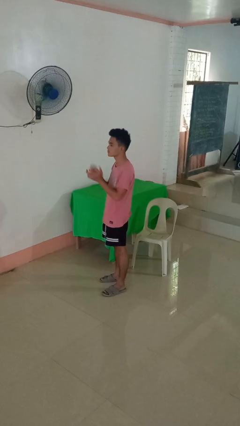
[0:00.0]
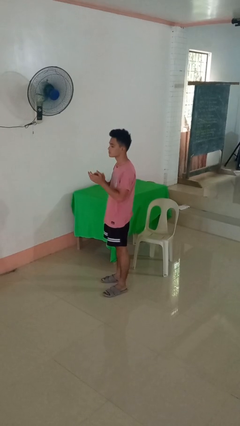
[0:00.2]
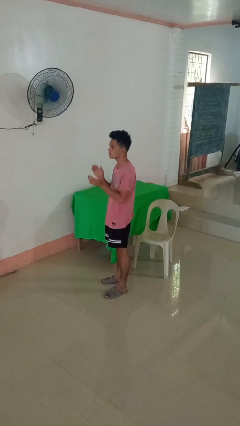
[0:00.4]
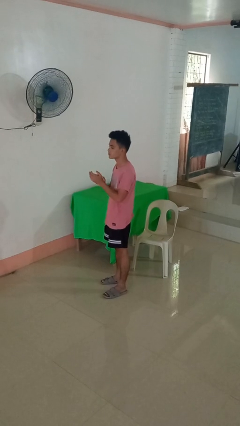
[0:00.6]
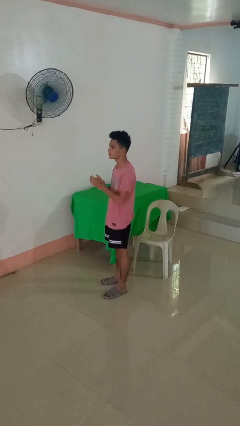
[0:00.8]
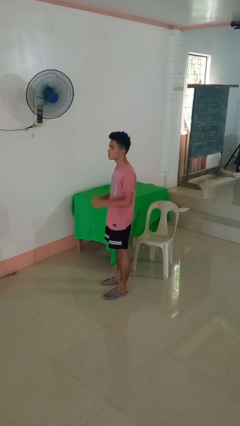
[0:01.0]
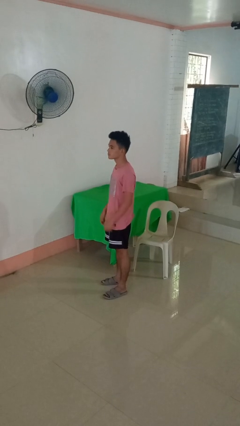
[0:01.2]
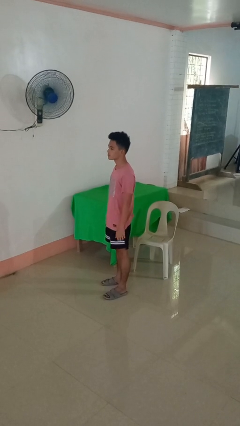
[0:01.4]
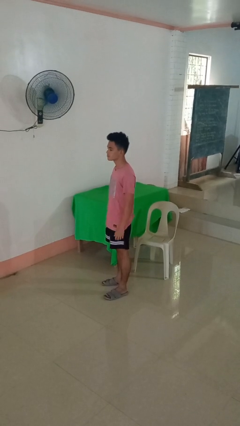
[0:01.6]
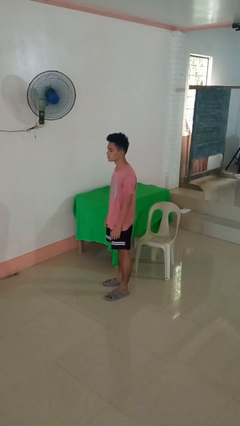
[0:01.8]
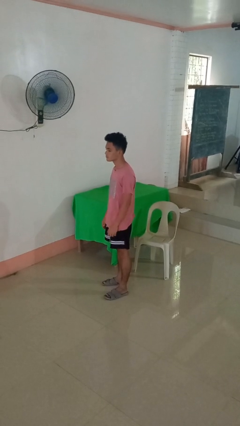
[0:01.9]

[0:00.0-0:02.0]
person claps hands

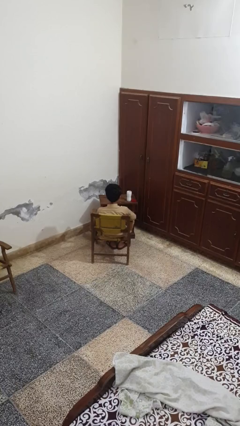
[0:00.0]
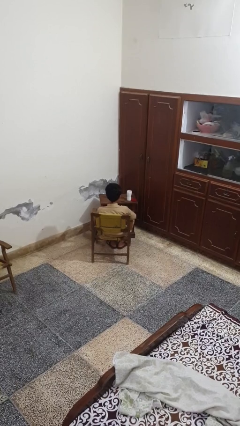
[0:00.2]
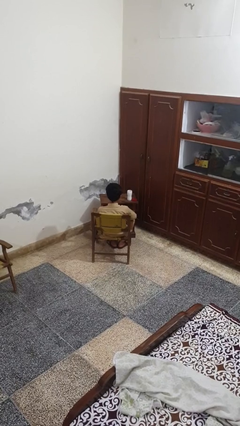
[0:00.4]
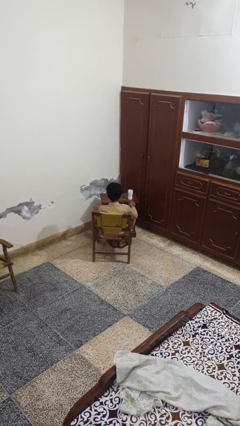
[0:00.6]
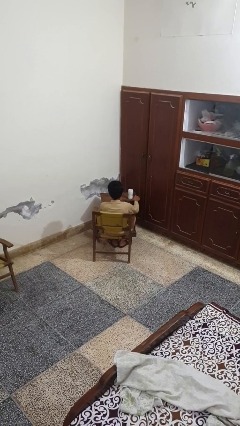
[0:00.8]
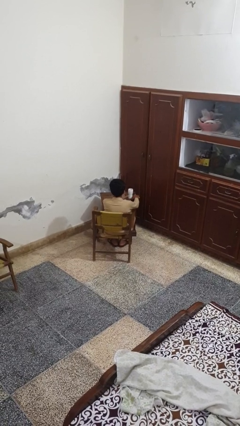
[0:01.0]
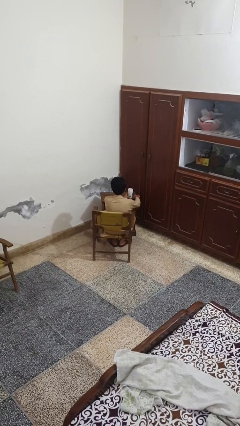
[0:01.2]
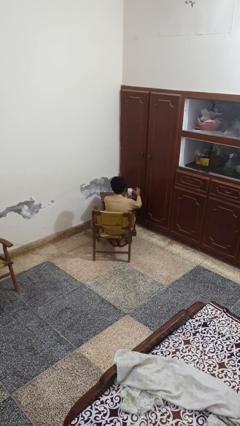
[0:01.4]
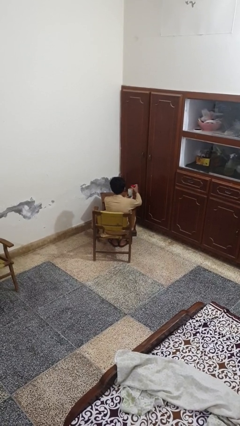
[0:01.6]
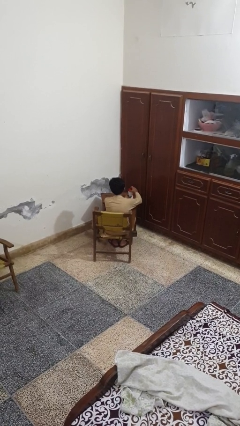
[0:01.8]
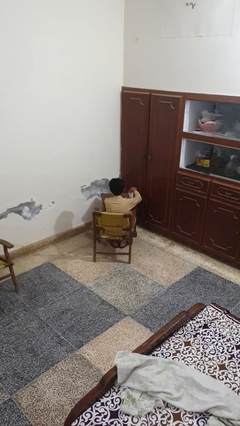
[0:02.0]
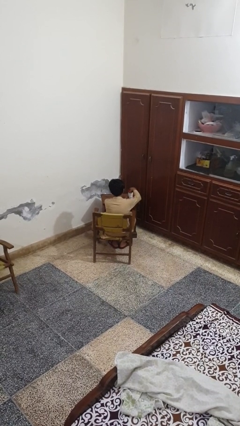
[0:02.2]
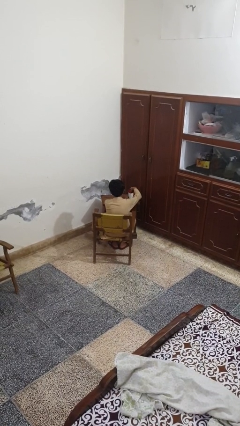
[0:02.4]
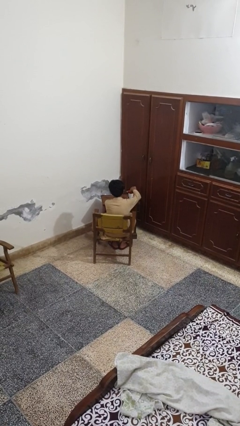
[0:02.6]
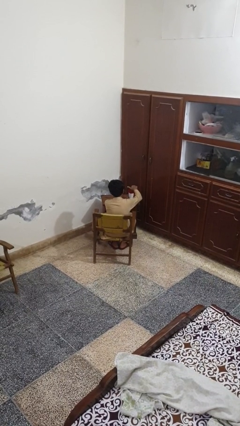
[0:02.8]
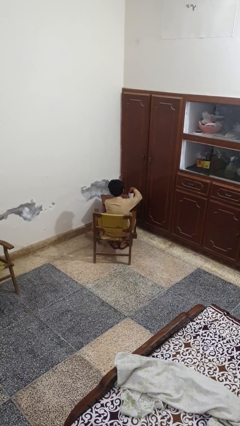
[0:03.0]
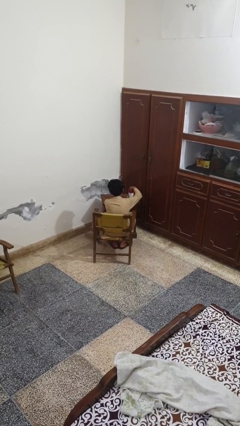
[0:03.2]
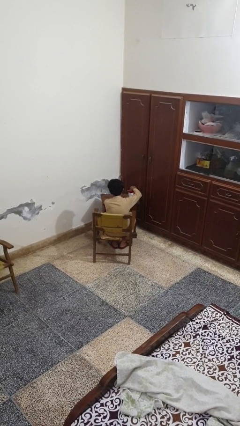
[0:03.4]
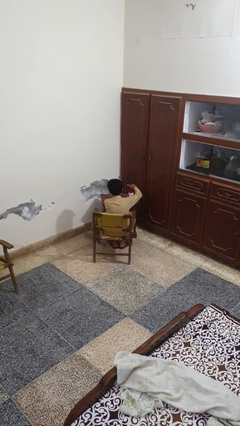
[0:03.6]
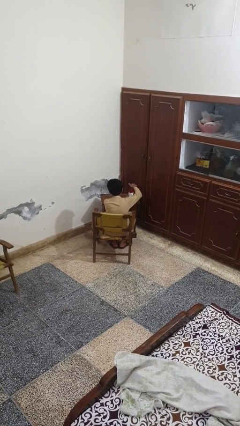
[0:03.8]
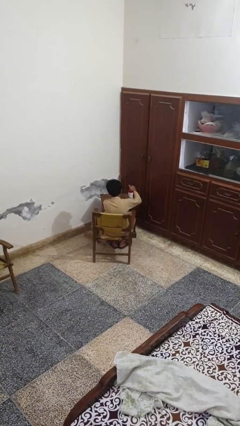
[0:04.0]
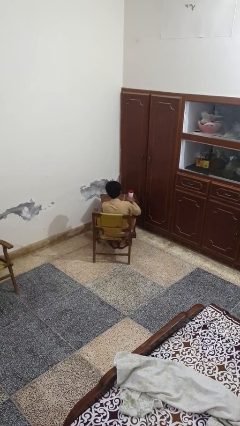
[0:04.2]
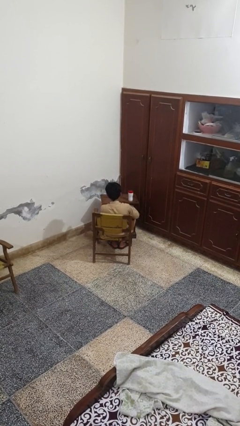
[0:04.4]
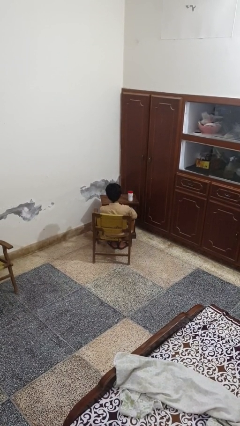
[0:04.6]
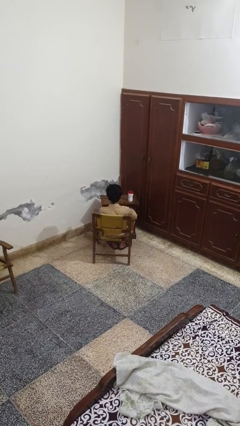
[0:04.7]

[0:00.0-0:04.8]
person closes jar

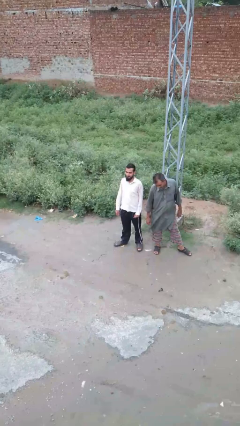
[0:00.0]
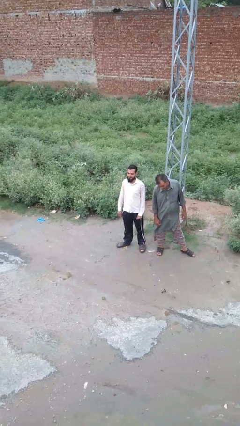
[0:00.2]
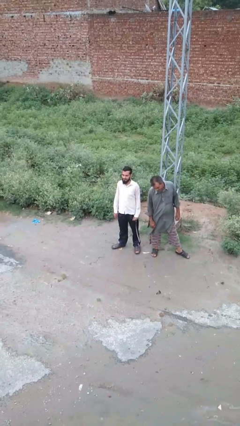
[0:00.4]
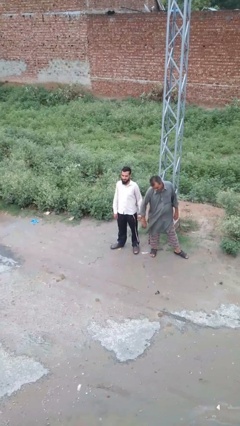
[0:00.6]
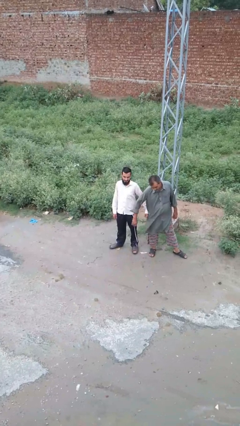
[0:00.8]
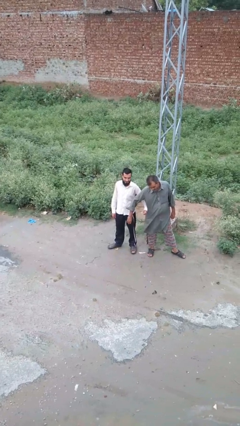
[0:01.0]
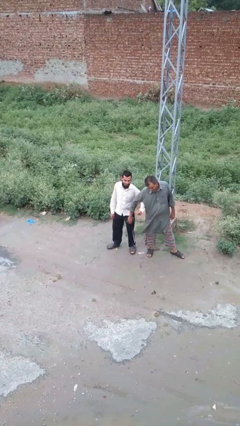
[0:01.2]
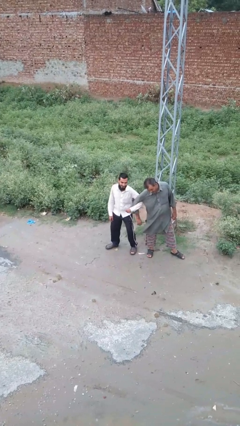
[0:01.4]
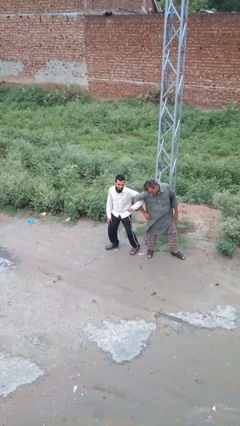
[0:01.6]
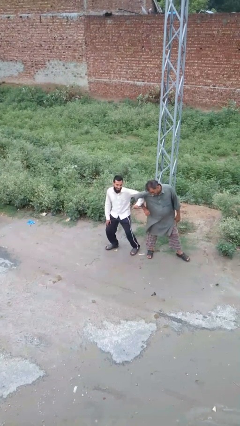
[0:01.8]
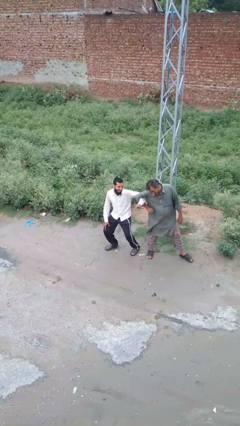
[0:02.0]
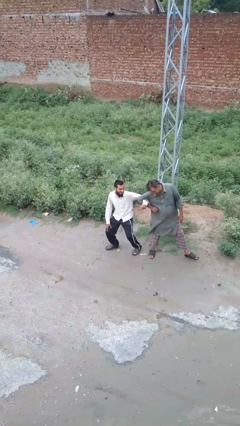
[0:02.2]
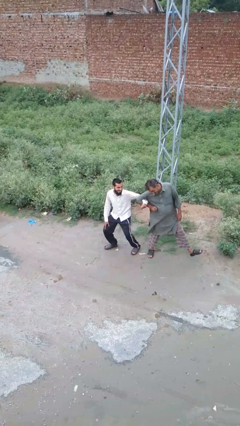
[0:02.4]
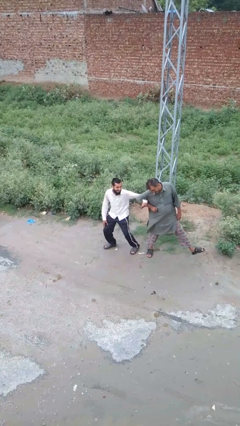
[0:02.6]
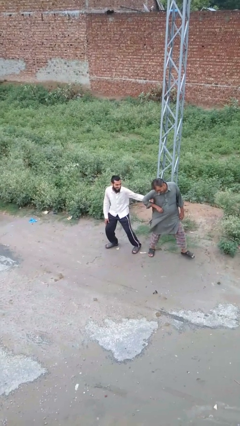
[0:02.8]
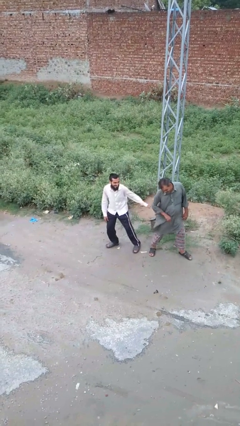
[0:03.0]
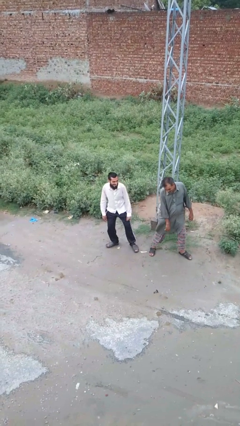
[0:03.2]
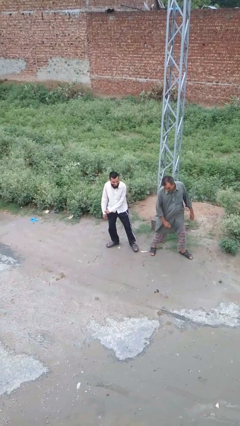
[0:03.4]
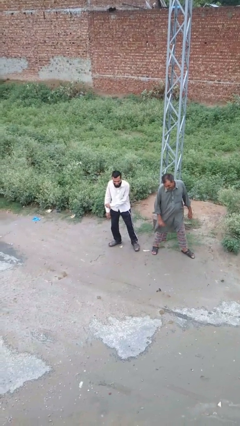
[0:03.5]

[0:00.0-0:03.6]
person grabs person by forearm

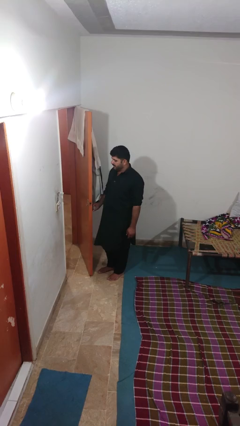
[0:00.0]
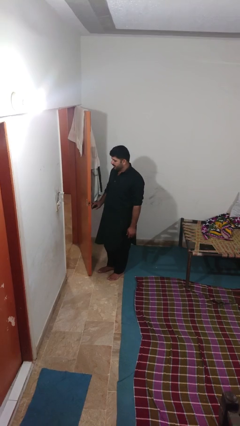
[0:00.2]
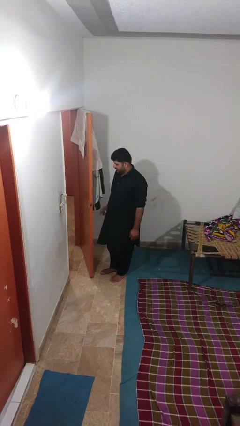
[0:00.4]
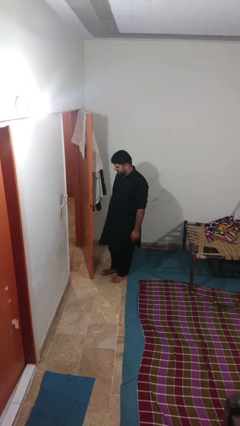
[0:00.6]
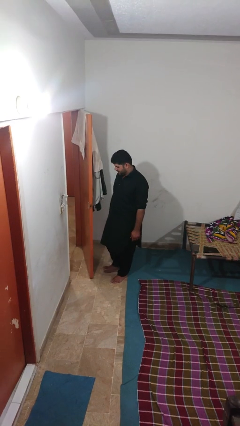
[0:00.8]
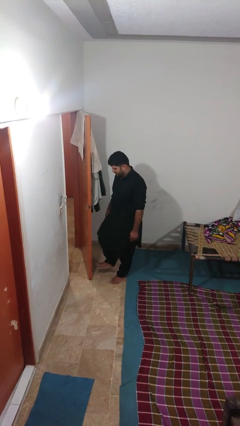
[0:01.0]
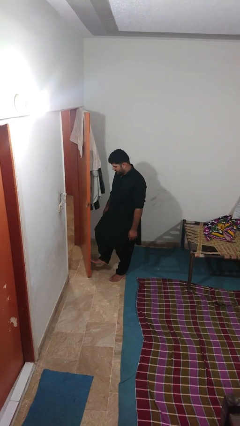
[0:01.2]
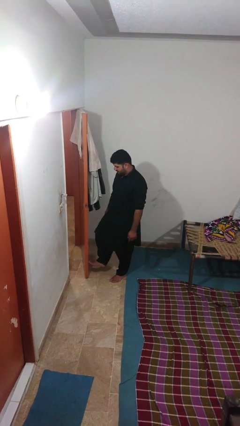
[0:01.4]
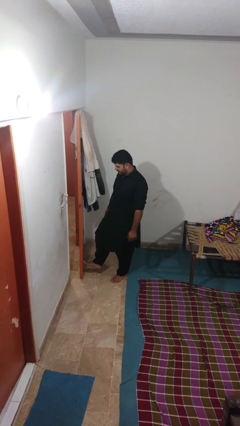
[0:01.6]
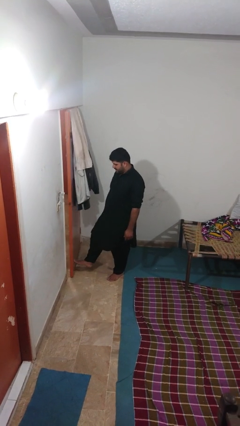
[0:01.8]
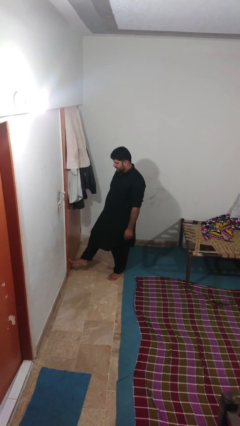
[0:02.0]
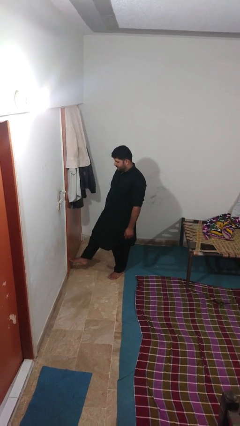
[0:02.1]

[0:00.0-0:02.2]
person closes door with foot

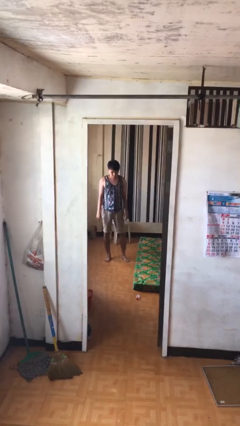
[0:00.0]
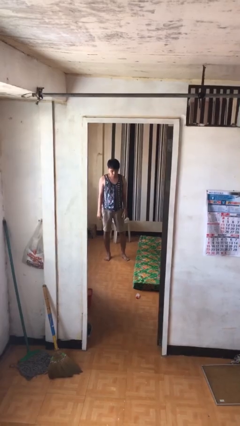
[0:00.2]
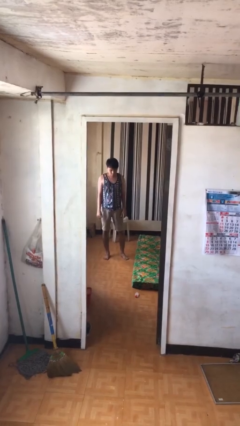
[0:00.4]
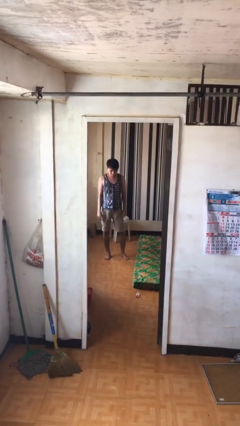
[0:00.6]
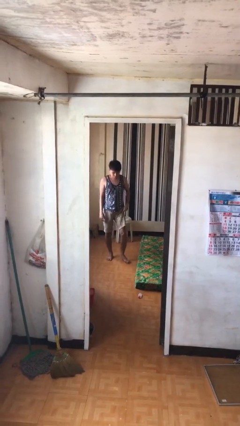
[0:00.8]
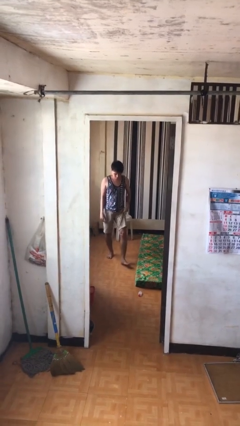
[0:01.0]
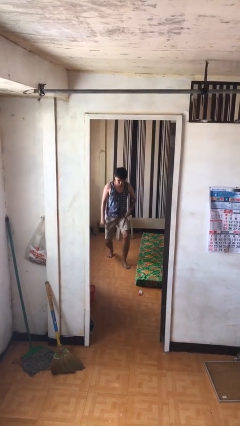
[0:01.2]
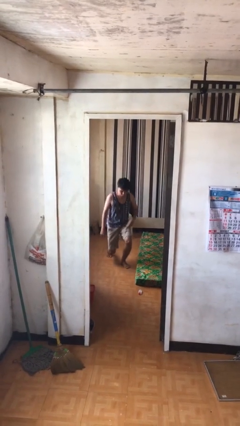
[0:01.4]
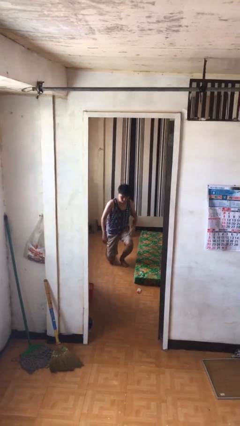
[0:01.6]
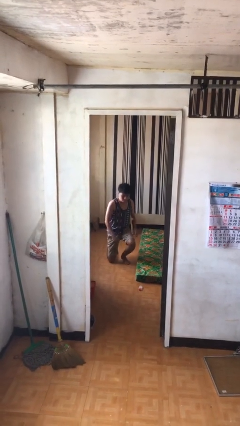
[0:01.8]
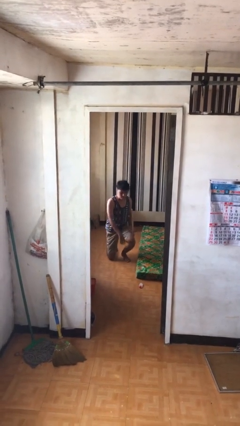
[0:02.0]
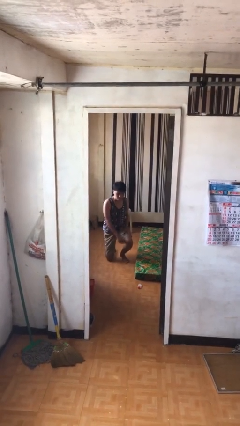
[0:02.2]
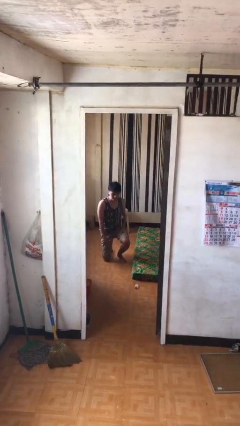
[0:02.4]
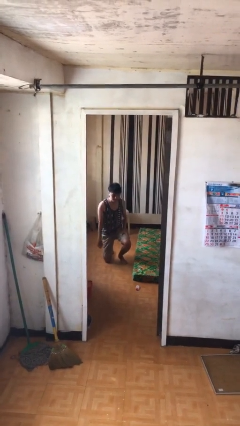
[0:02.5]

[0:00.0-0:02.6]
person kneels

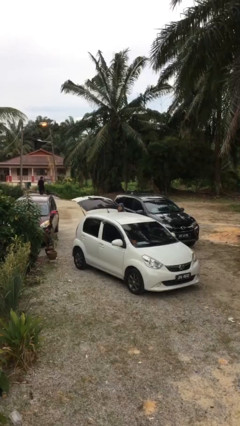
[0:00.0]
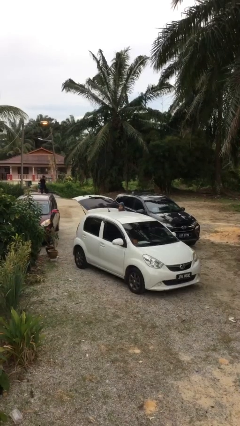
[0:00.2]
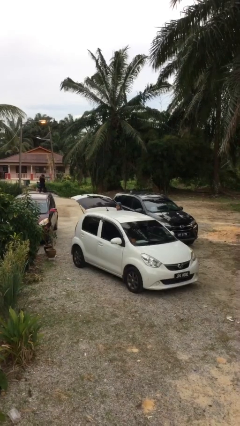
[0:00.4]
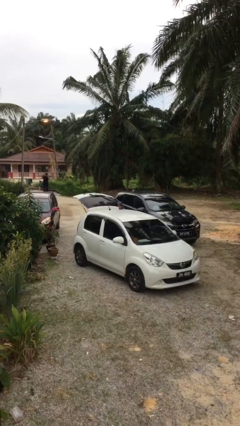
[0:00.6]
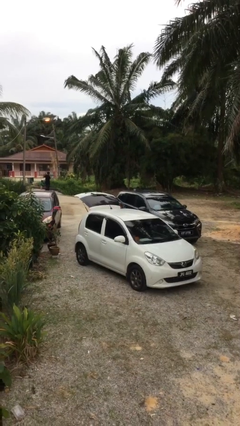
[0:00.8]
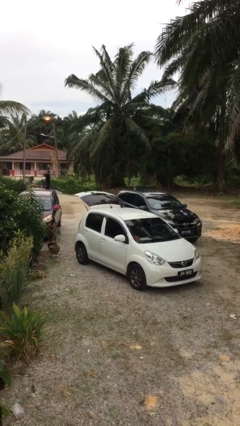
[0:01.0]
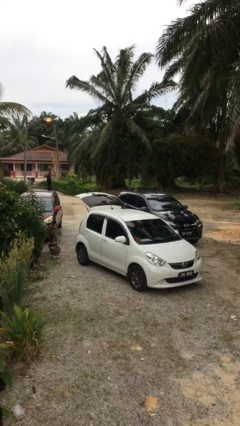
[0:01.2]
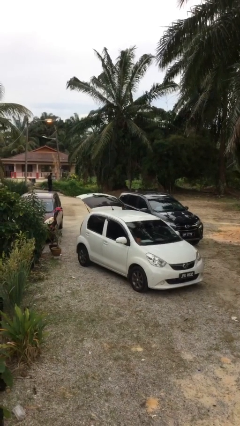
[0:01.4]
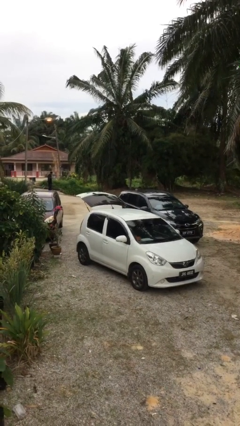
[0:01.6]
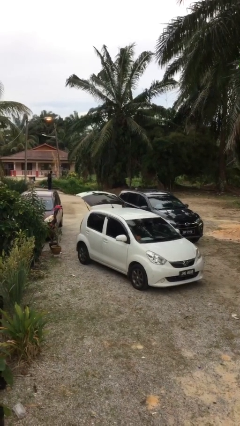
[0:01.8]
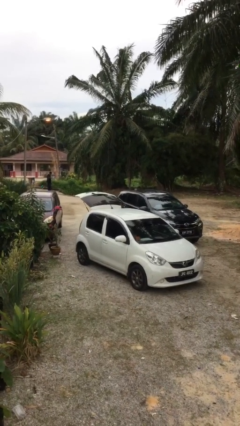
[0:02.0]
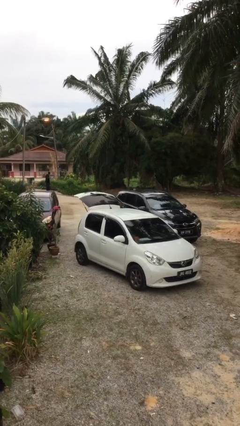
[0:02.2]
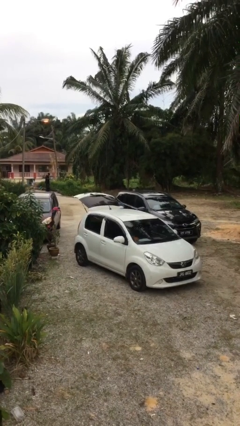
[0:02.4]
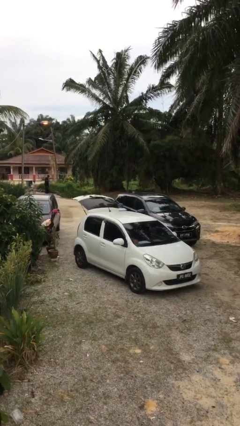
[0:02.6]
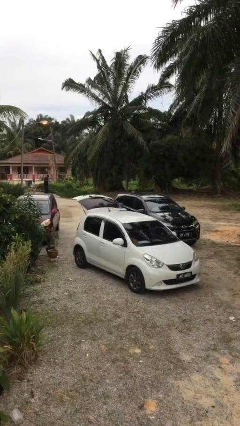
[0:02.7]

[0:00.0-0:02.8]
person unloads car
